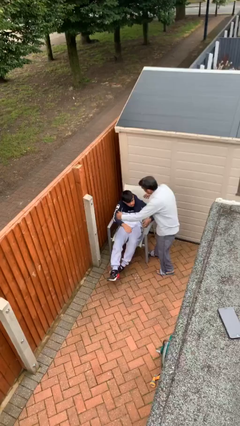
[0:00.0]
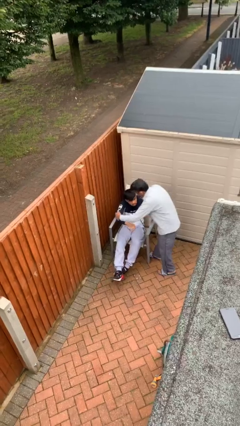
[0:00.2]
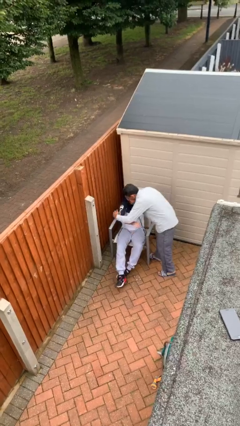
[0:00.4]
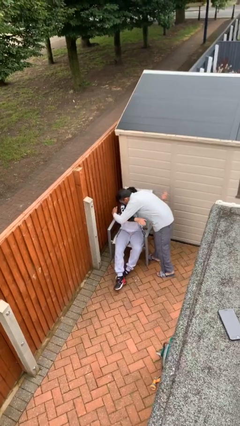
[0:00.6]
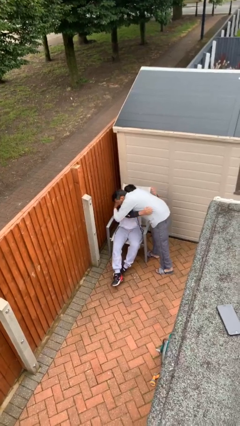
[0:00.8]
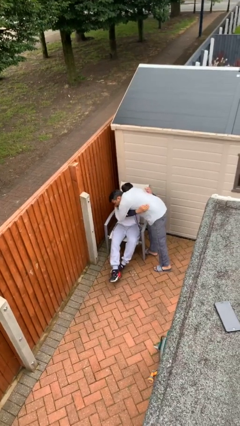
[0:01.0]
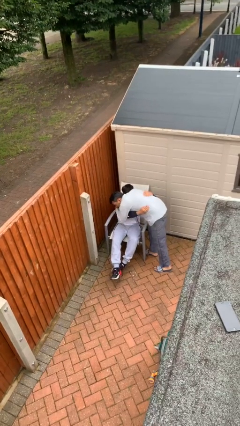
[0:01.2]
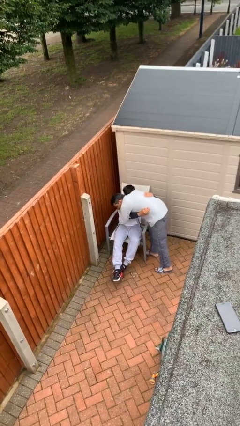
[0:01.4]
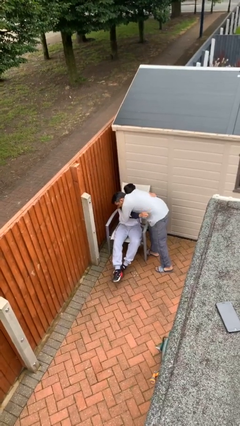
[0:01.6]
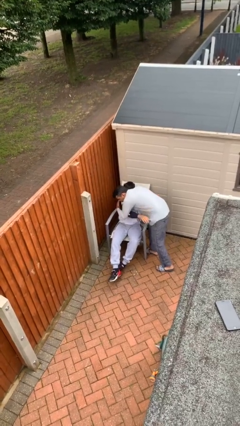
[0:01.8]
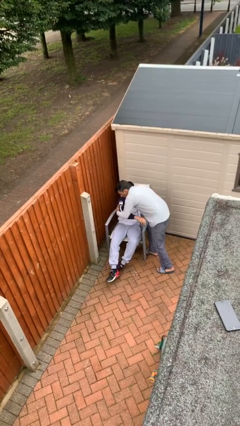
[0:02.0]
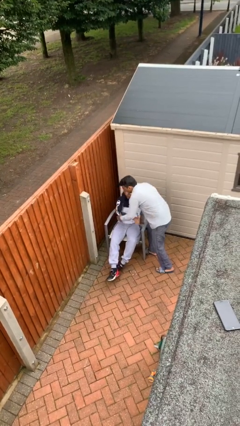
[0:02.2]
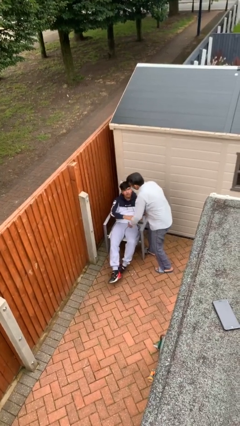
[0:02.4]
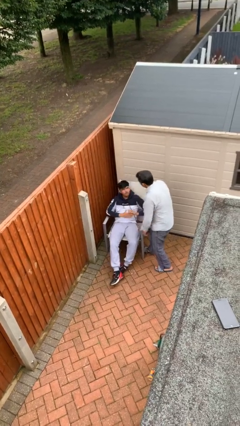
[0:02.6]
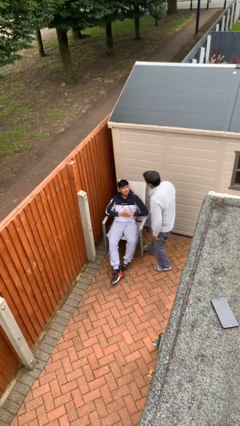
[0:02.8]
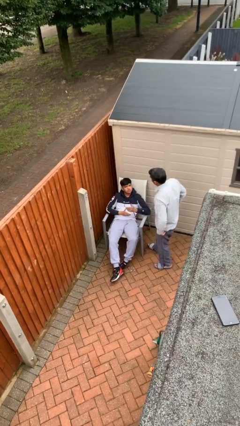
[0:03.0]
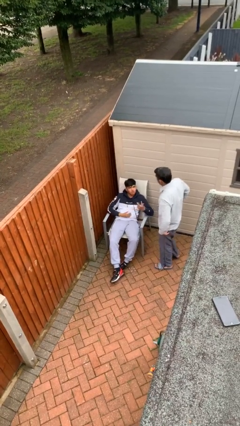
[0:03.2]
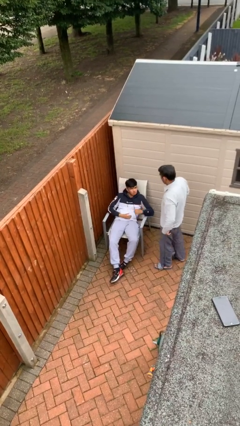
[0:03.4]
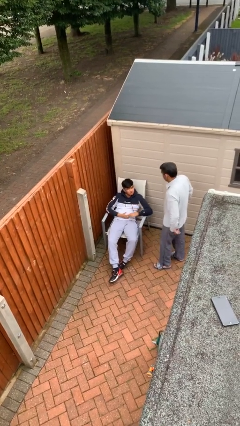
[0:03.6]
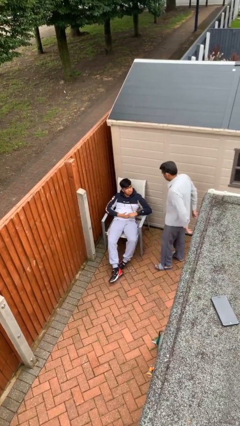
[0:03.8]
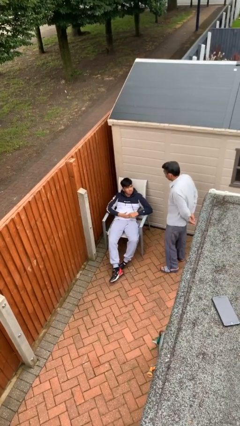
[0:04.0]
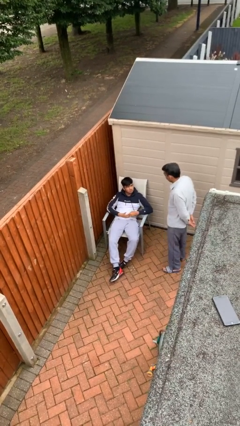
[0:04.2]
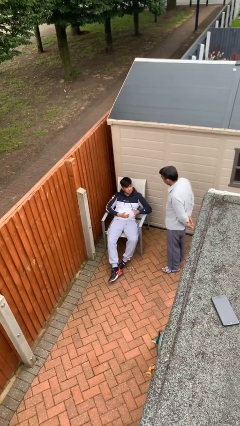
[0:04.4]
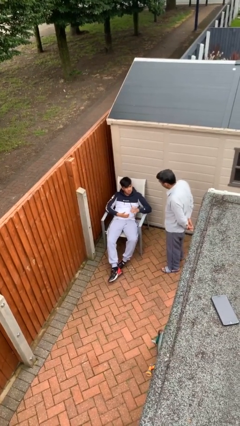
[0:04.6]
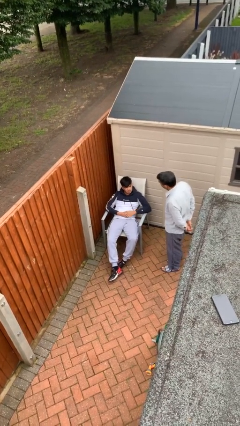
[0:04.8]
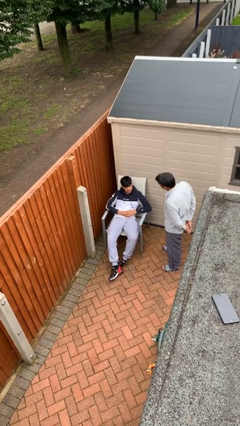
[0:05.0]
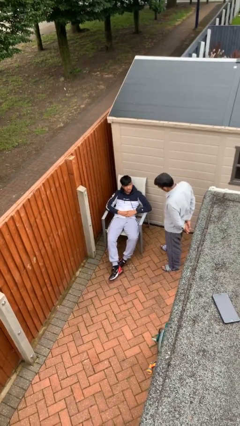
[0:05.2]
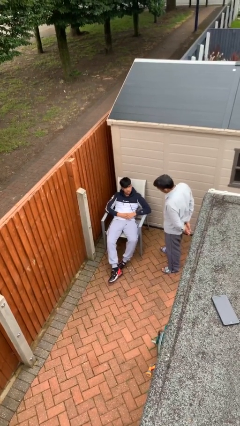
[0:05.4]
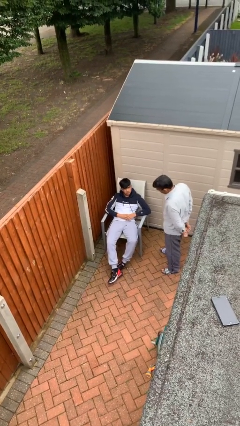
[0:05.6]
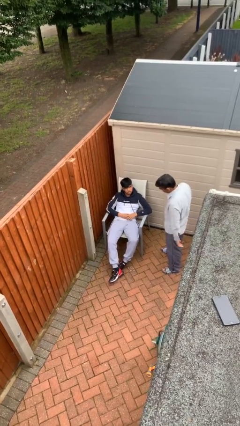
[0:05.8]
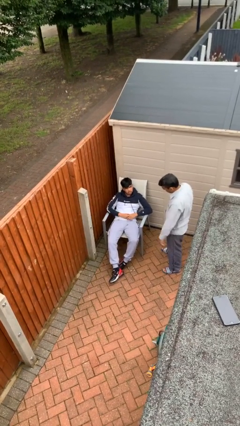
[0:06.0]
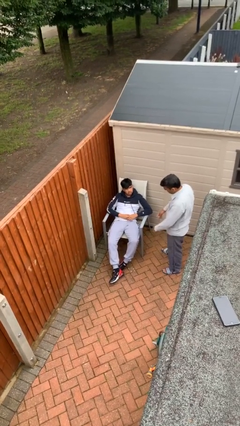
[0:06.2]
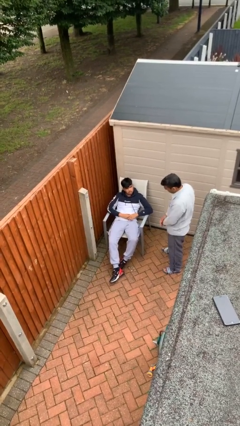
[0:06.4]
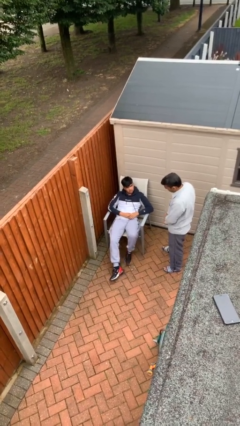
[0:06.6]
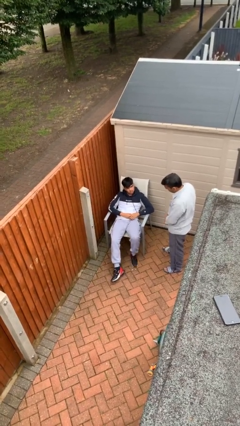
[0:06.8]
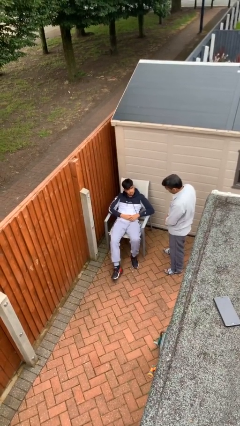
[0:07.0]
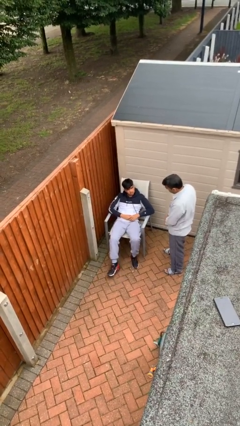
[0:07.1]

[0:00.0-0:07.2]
person embraces person

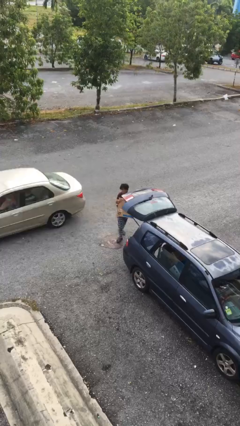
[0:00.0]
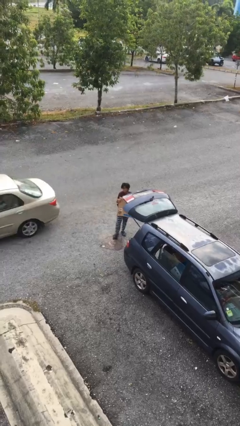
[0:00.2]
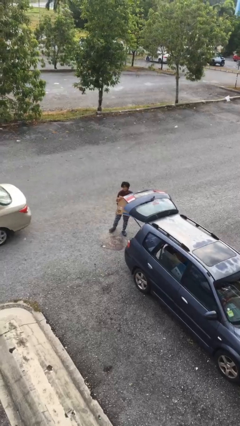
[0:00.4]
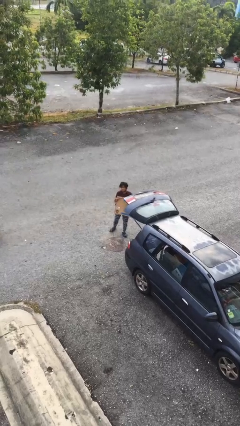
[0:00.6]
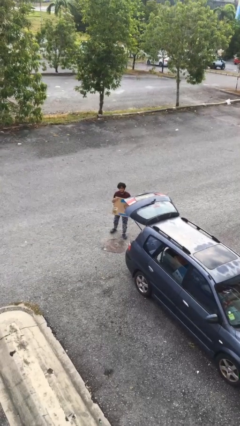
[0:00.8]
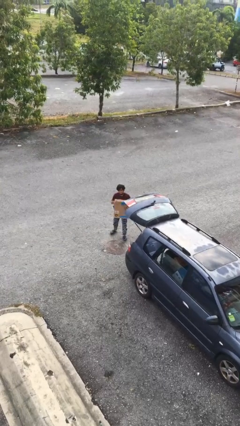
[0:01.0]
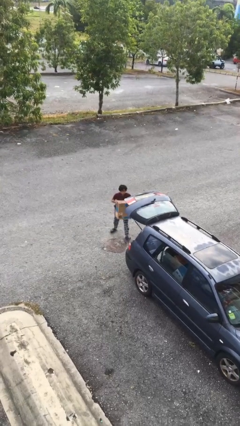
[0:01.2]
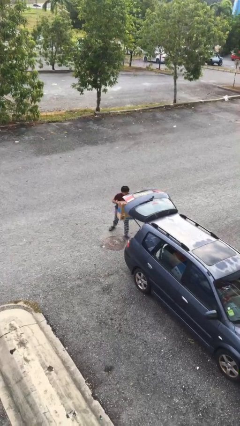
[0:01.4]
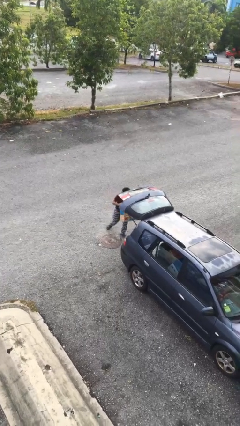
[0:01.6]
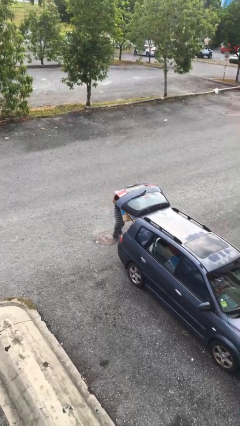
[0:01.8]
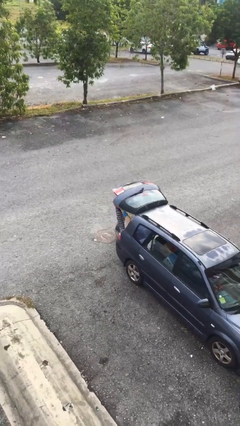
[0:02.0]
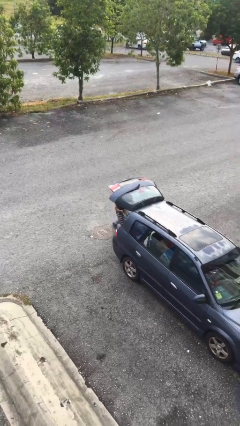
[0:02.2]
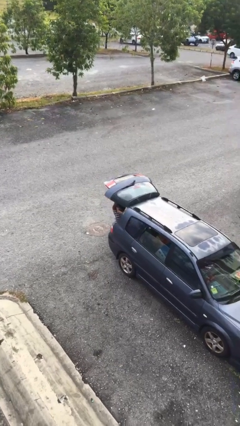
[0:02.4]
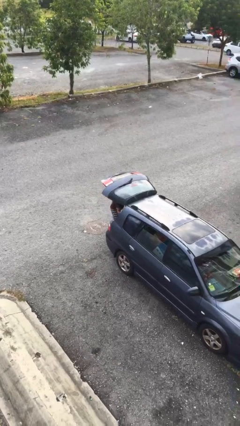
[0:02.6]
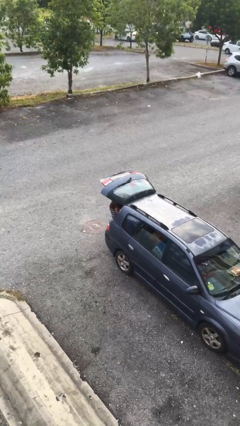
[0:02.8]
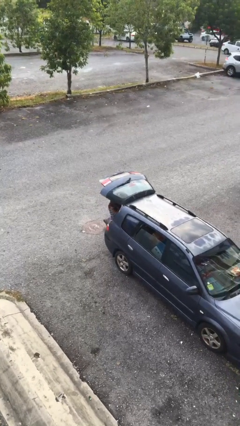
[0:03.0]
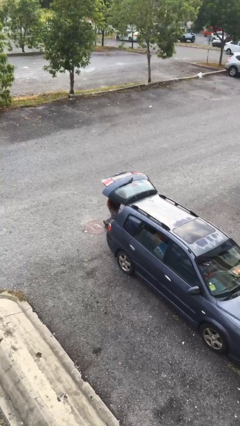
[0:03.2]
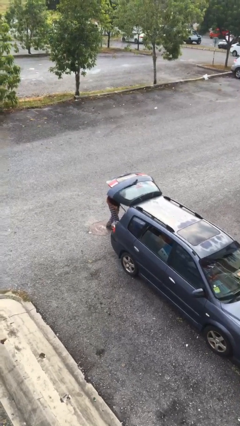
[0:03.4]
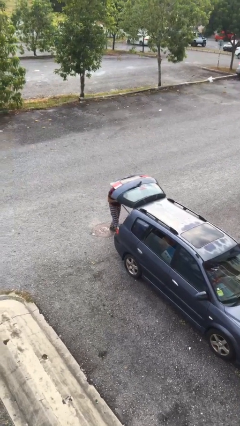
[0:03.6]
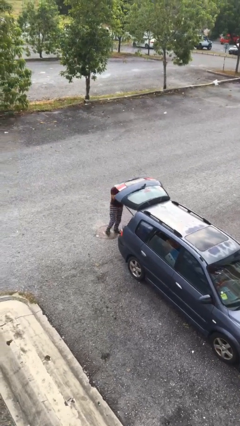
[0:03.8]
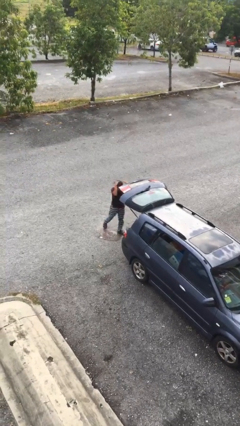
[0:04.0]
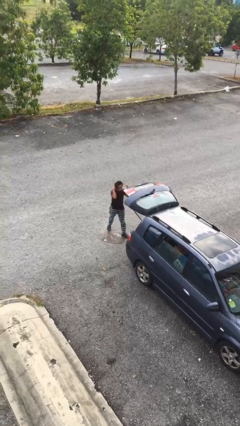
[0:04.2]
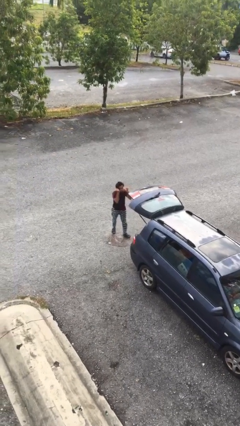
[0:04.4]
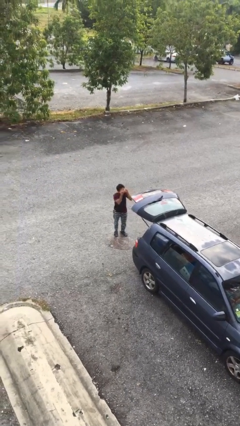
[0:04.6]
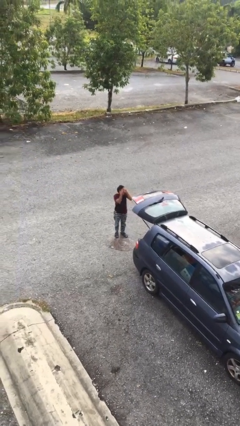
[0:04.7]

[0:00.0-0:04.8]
person loads car

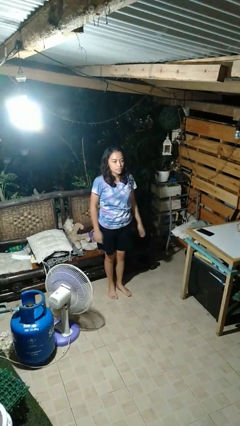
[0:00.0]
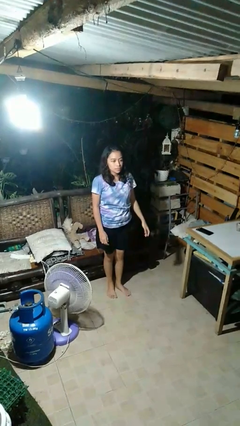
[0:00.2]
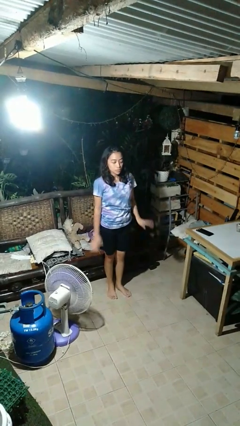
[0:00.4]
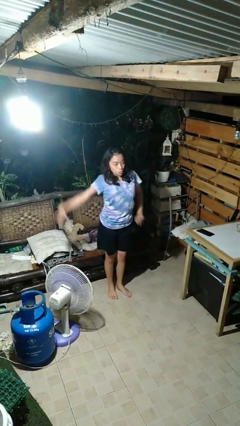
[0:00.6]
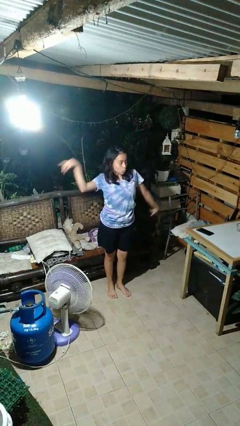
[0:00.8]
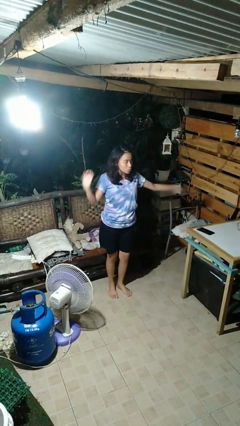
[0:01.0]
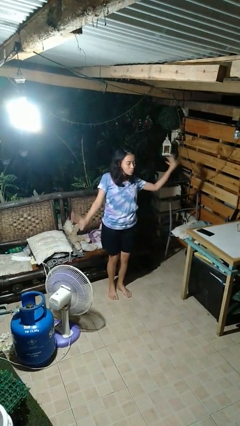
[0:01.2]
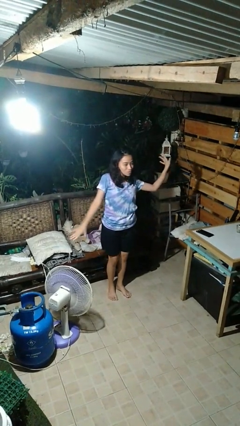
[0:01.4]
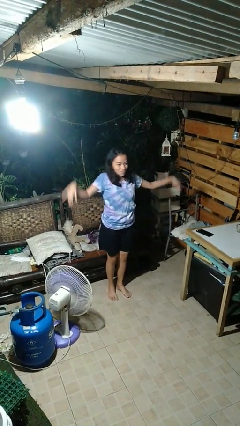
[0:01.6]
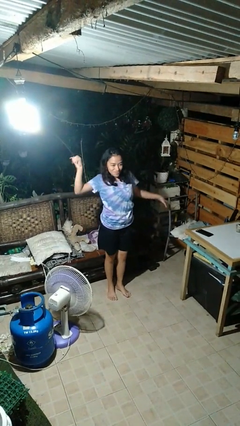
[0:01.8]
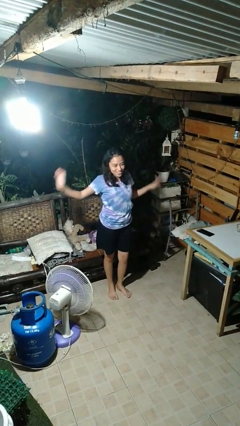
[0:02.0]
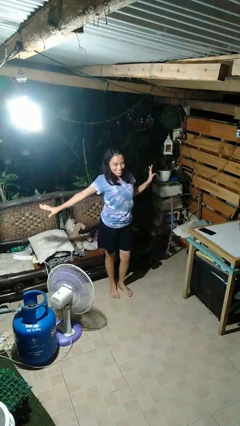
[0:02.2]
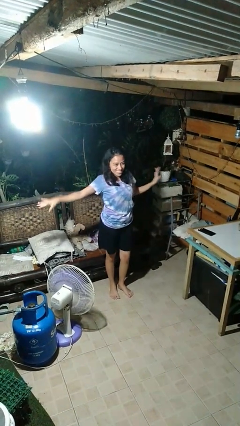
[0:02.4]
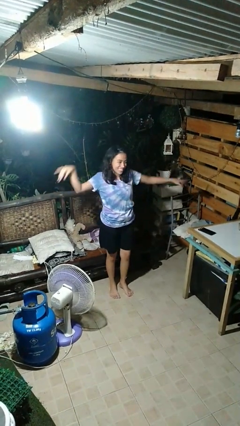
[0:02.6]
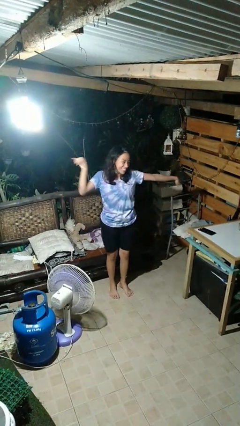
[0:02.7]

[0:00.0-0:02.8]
person dances in place

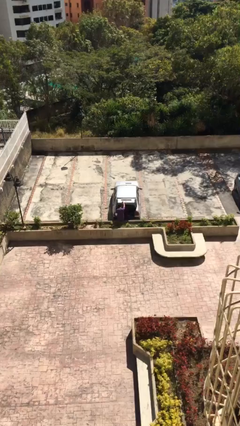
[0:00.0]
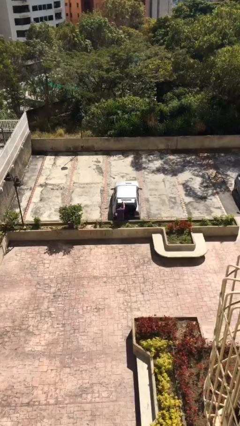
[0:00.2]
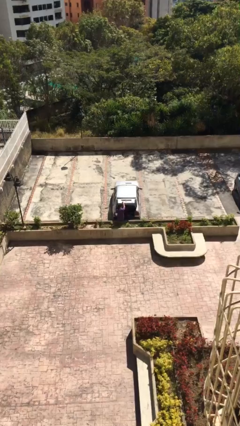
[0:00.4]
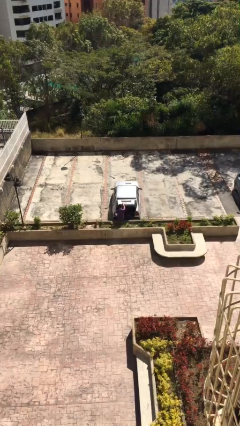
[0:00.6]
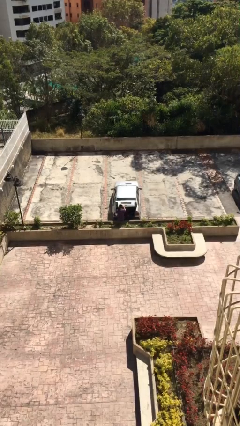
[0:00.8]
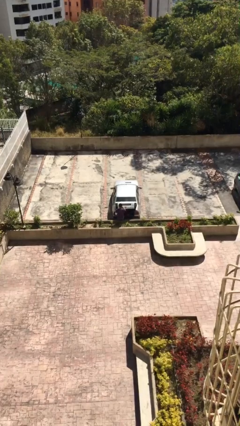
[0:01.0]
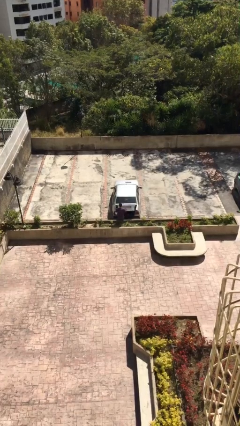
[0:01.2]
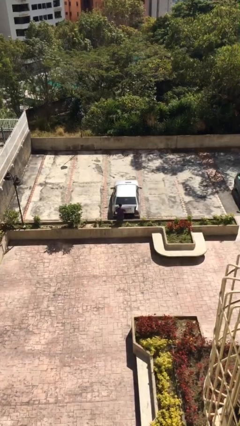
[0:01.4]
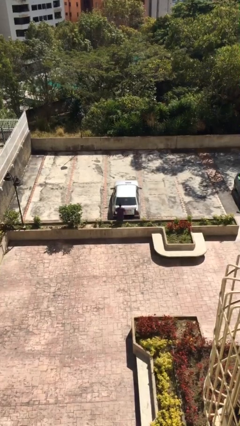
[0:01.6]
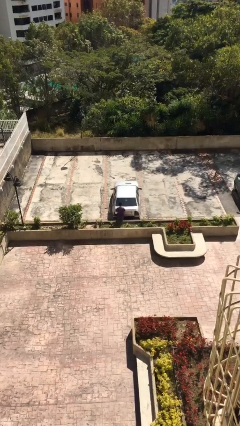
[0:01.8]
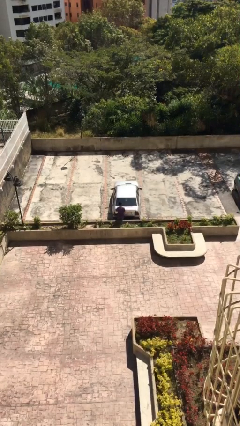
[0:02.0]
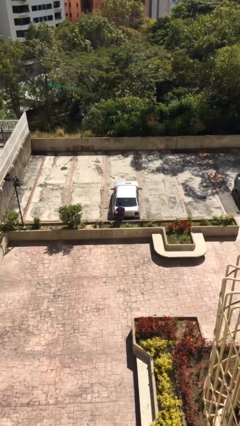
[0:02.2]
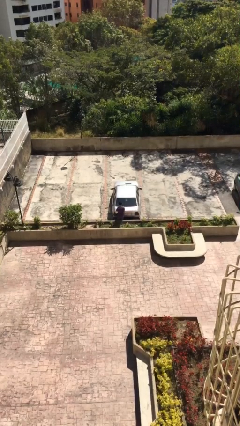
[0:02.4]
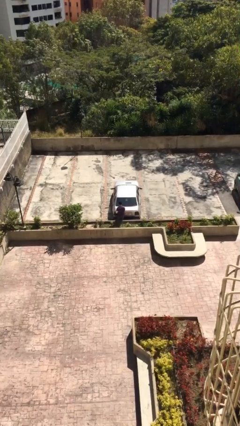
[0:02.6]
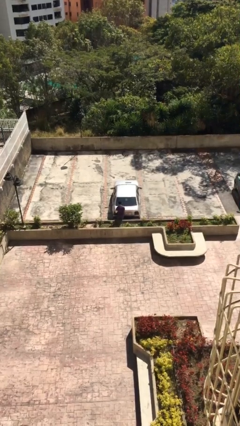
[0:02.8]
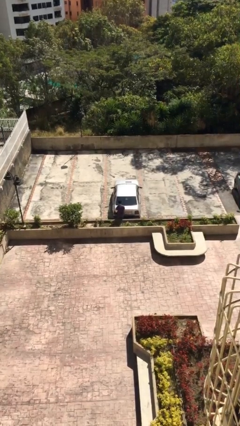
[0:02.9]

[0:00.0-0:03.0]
person closes car trunk

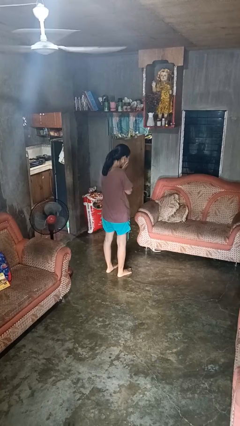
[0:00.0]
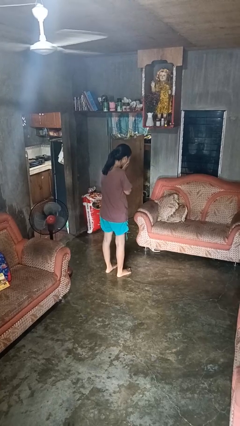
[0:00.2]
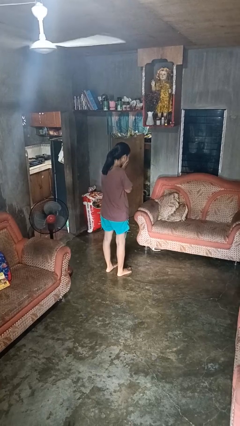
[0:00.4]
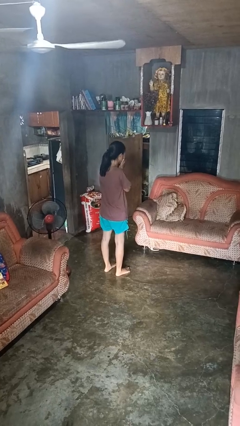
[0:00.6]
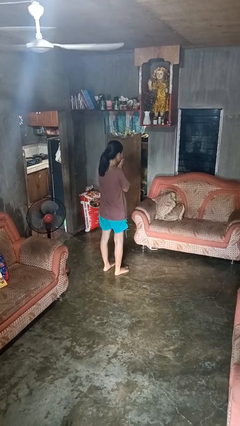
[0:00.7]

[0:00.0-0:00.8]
person sneezes into hand
